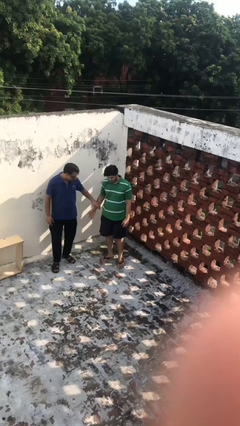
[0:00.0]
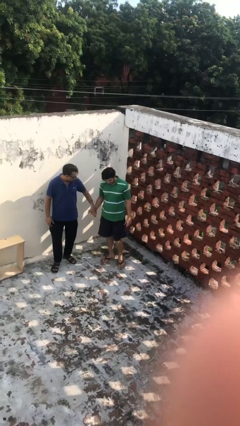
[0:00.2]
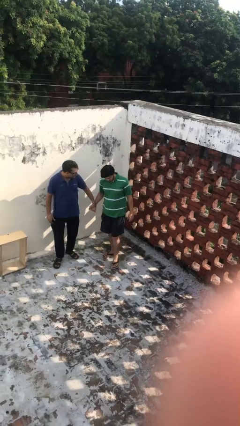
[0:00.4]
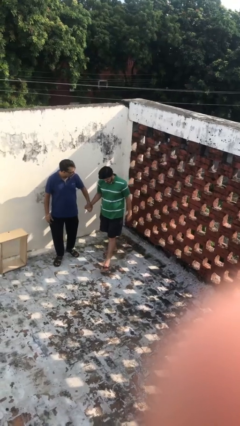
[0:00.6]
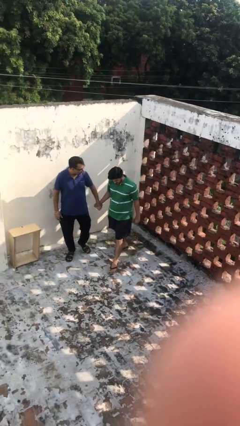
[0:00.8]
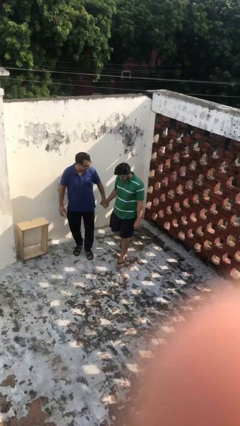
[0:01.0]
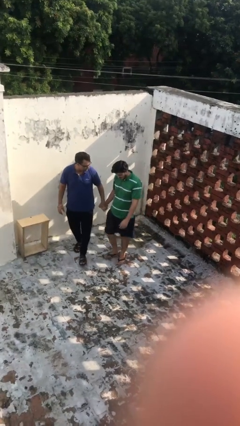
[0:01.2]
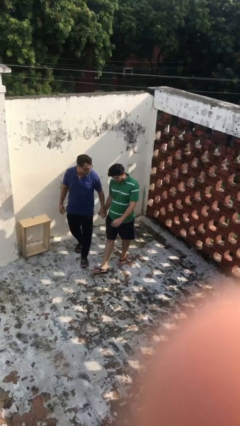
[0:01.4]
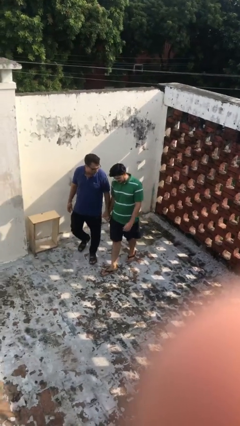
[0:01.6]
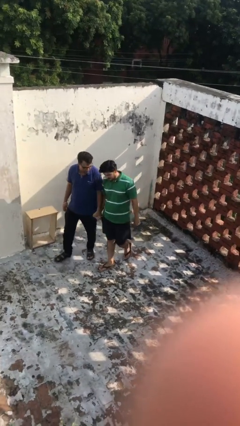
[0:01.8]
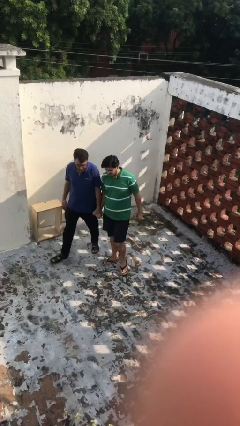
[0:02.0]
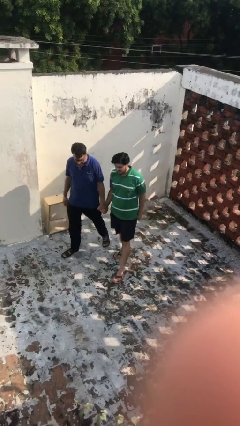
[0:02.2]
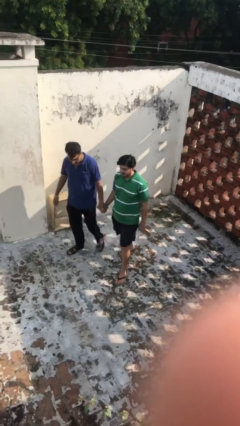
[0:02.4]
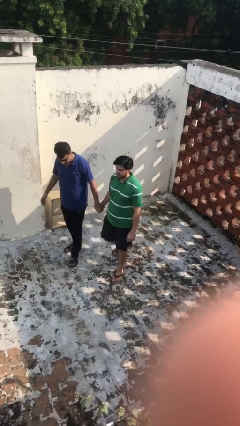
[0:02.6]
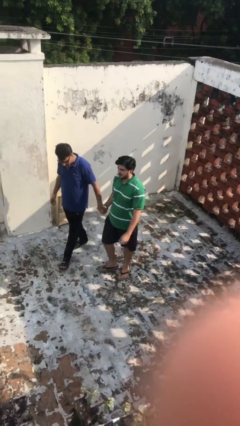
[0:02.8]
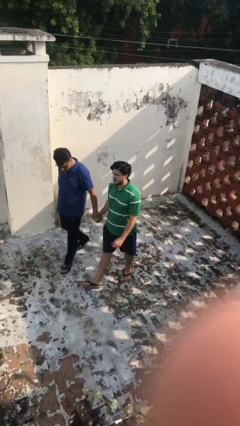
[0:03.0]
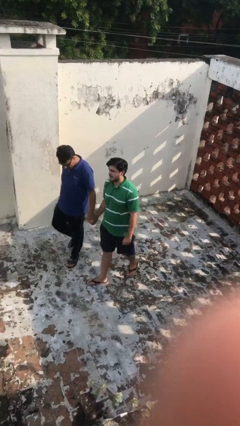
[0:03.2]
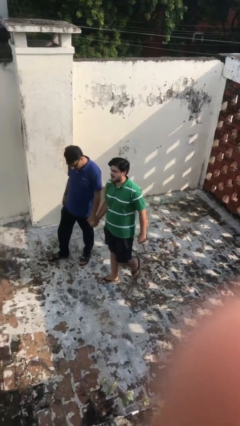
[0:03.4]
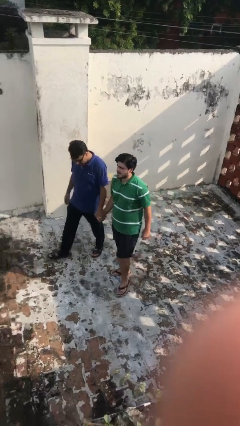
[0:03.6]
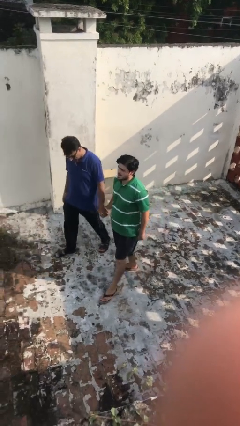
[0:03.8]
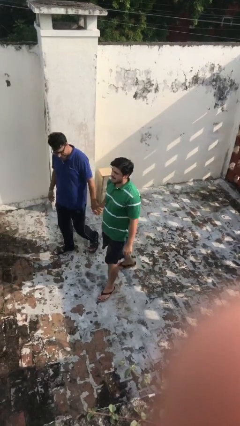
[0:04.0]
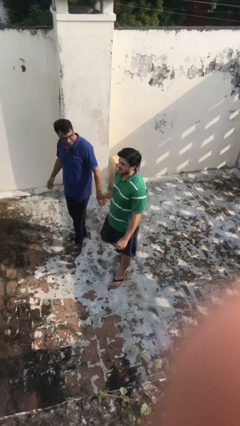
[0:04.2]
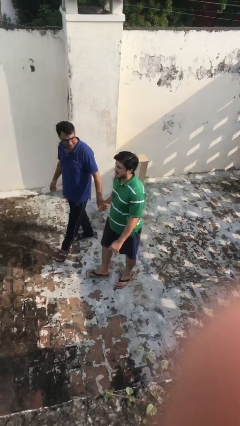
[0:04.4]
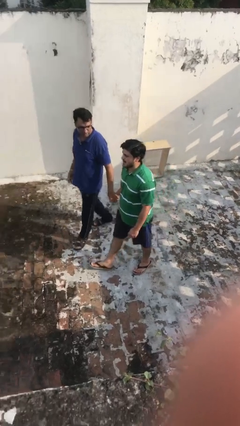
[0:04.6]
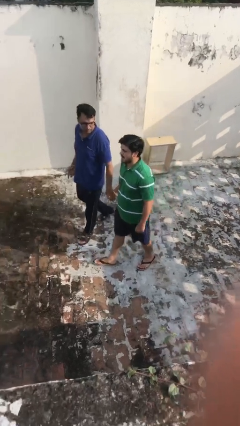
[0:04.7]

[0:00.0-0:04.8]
person holds hand

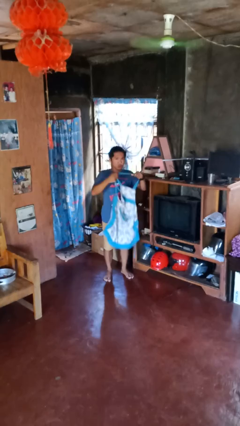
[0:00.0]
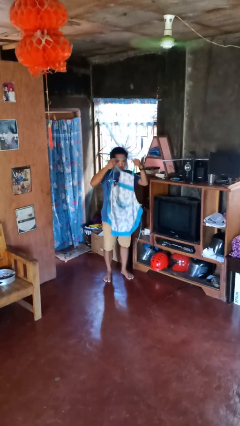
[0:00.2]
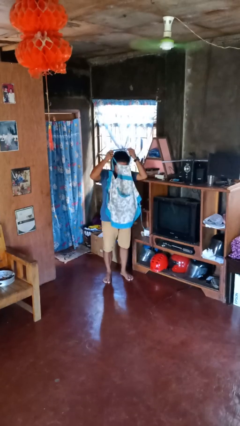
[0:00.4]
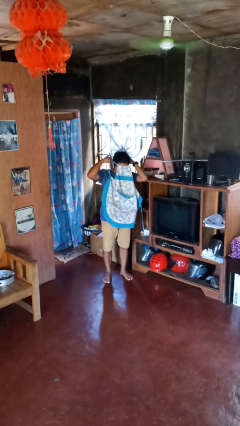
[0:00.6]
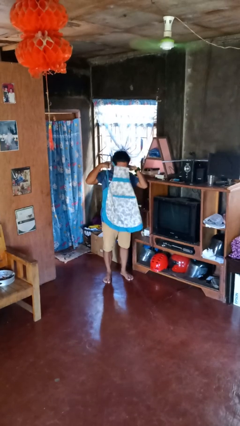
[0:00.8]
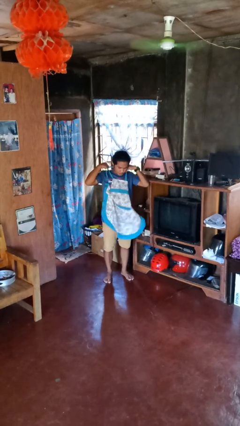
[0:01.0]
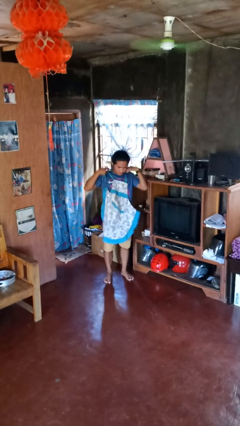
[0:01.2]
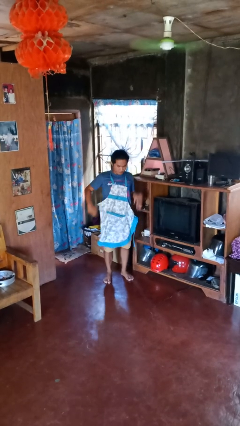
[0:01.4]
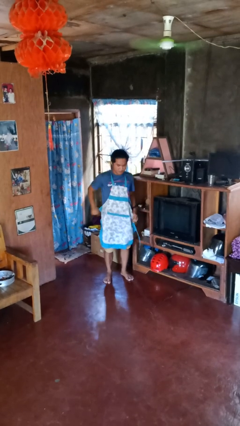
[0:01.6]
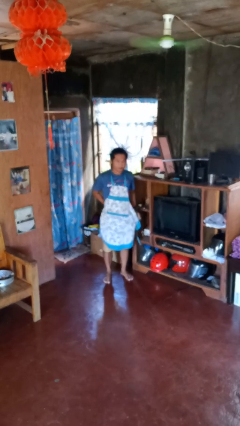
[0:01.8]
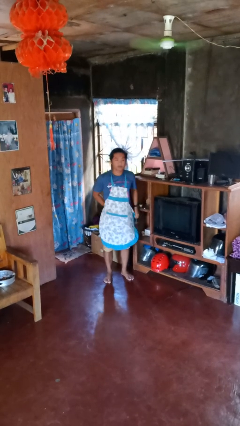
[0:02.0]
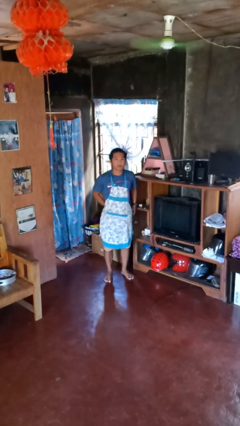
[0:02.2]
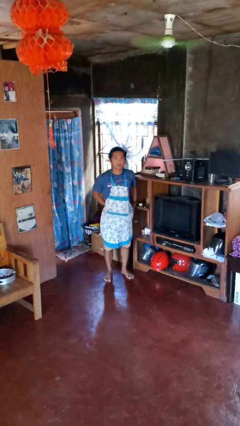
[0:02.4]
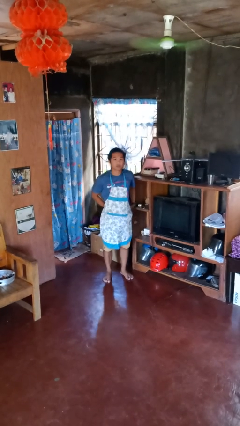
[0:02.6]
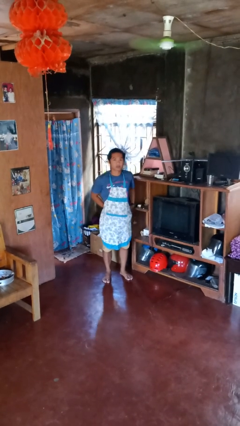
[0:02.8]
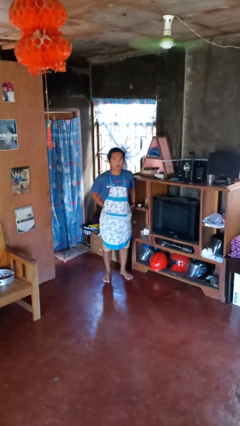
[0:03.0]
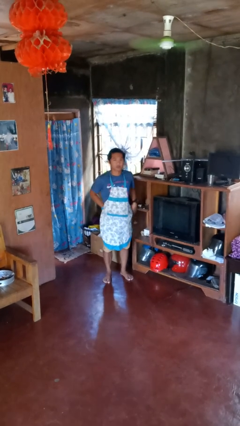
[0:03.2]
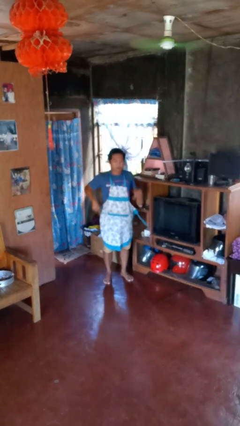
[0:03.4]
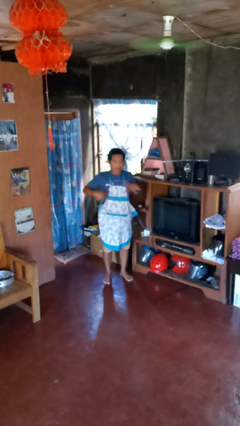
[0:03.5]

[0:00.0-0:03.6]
person puts on apron

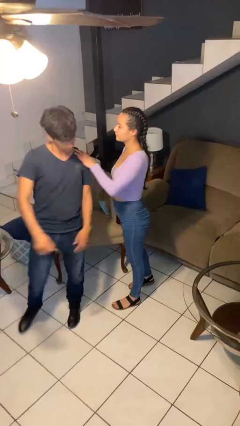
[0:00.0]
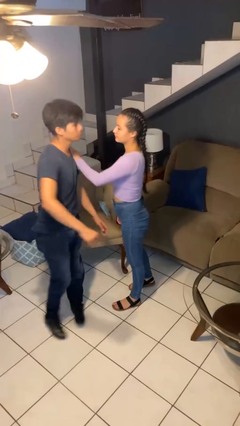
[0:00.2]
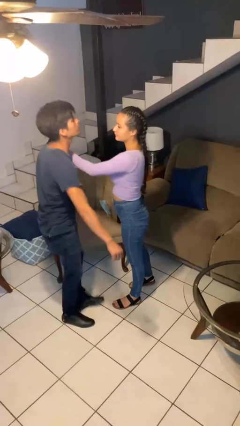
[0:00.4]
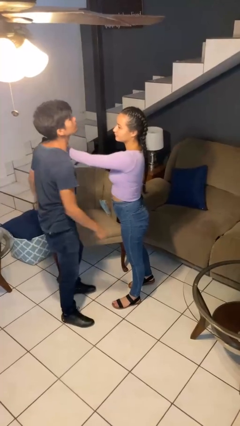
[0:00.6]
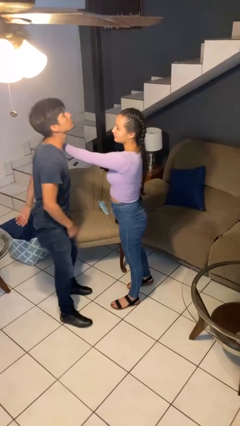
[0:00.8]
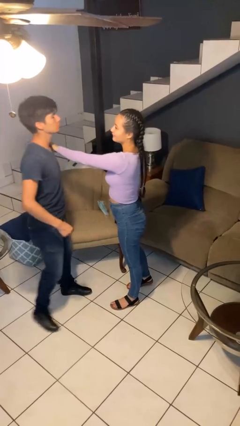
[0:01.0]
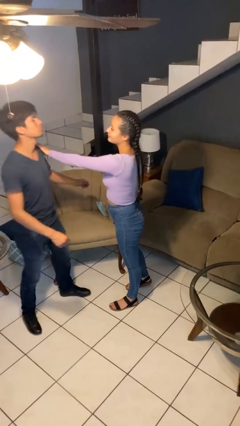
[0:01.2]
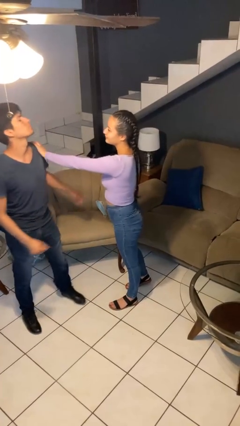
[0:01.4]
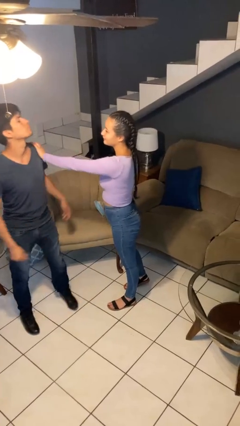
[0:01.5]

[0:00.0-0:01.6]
person spins person around

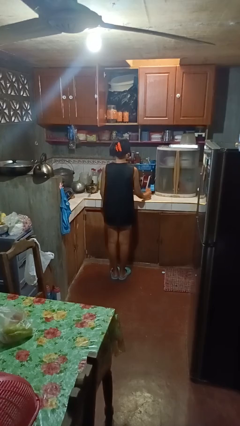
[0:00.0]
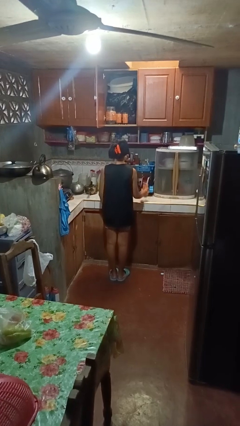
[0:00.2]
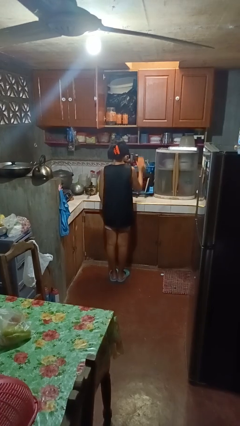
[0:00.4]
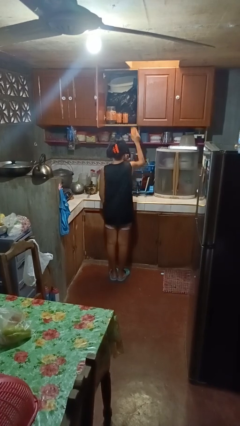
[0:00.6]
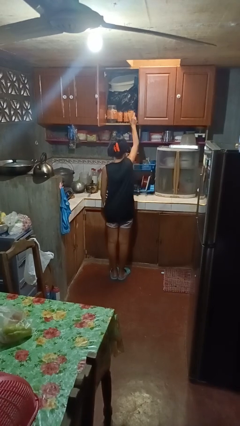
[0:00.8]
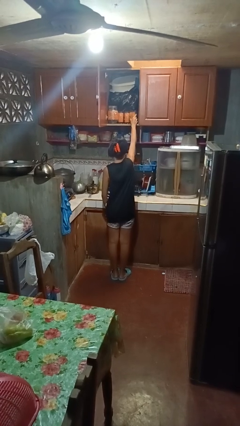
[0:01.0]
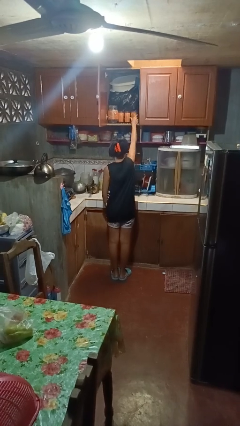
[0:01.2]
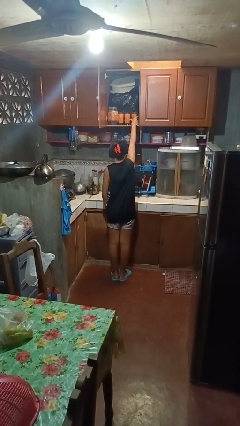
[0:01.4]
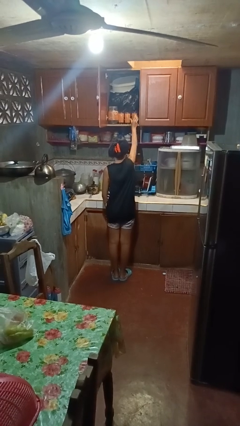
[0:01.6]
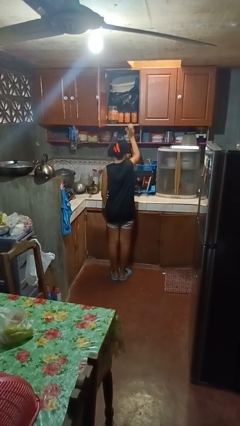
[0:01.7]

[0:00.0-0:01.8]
person puts object in cabinet

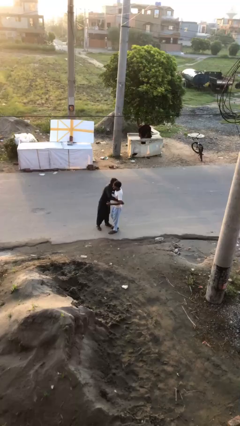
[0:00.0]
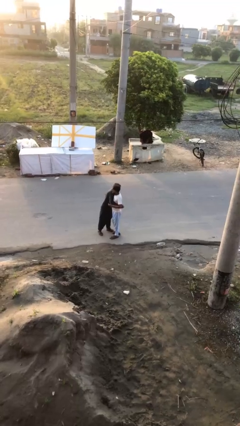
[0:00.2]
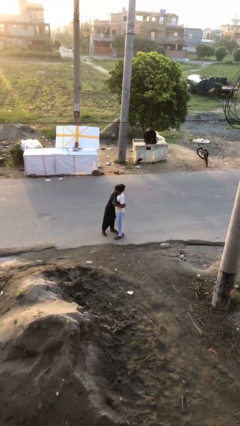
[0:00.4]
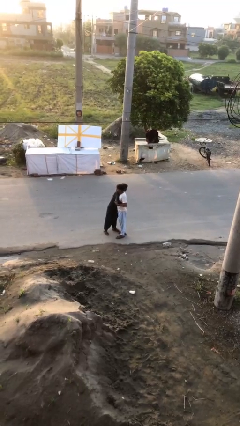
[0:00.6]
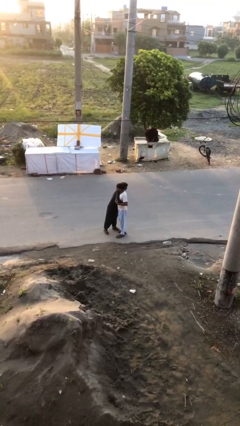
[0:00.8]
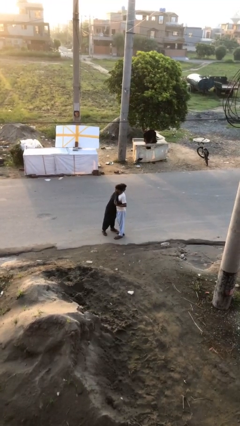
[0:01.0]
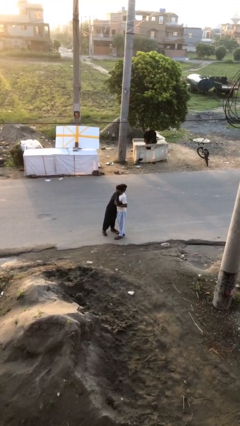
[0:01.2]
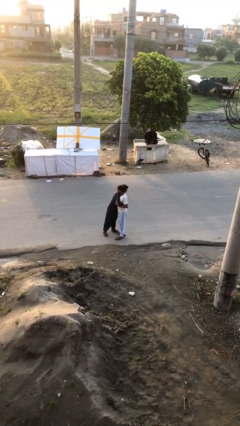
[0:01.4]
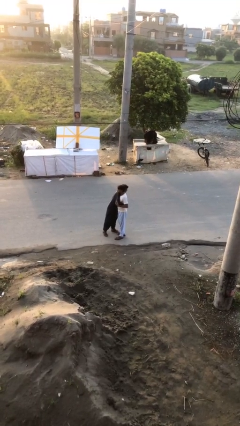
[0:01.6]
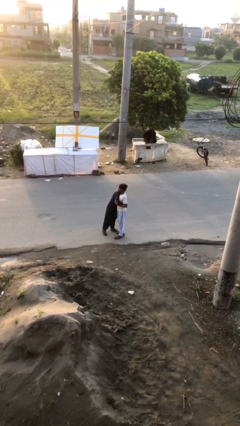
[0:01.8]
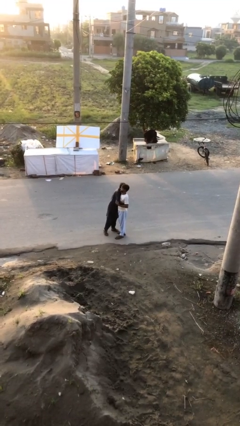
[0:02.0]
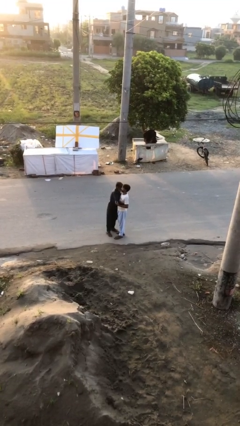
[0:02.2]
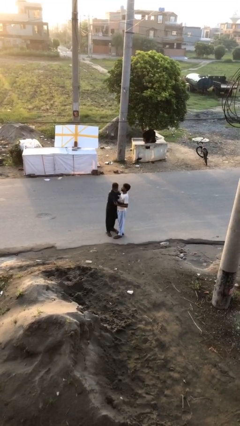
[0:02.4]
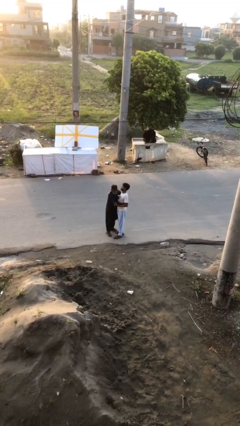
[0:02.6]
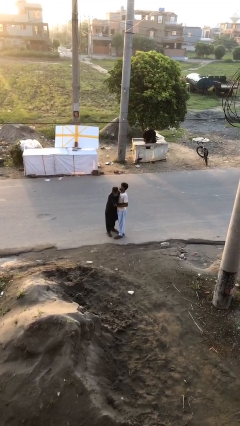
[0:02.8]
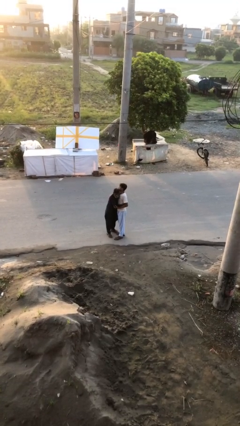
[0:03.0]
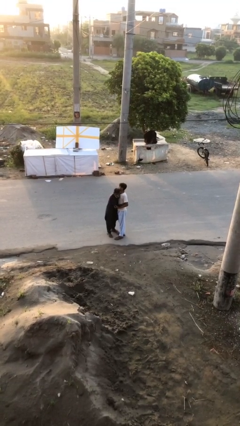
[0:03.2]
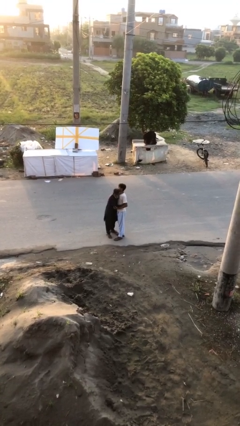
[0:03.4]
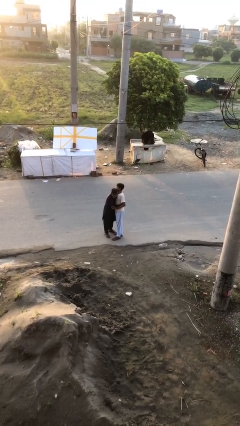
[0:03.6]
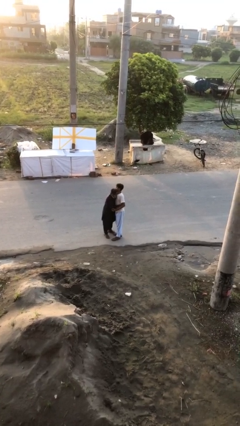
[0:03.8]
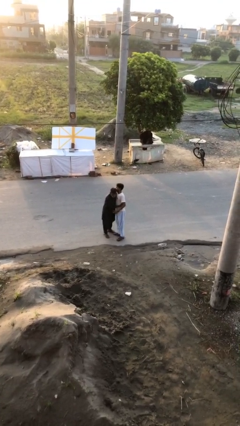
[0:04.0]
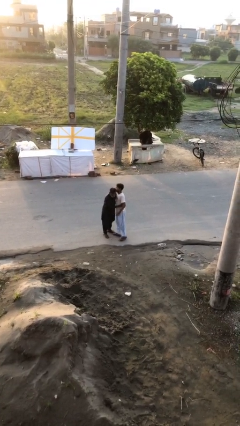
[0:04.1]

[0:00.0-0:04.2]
person embraces person

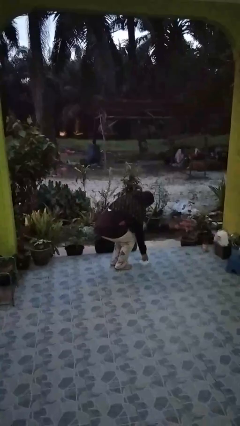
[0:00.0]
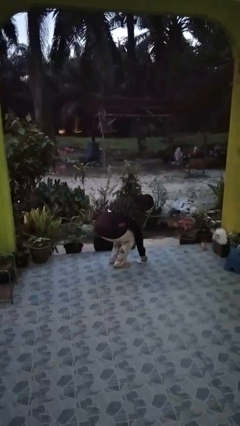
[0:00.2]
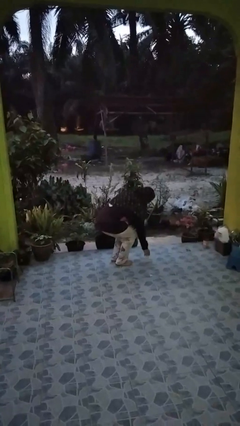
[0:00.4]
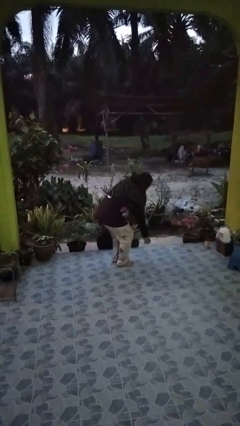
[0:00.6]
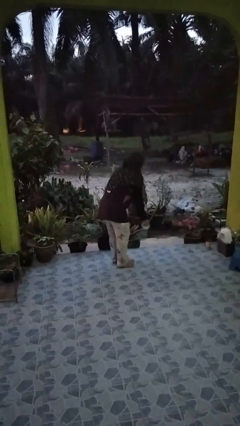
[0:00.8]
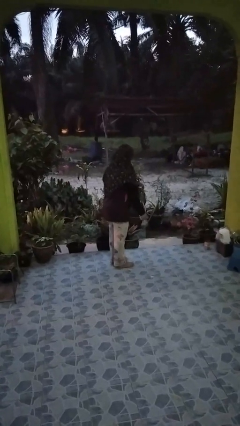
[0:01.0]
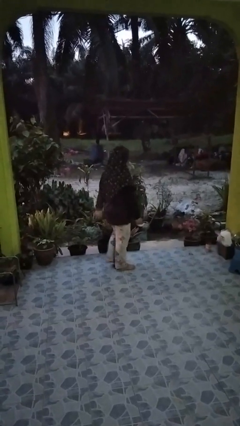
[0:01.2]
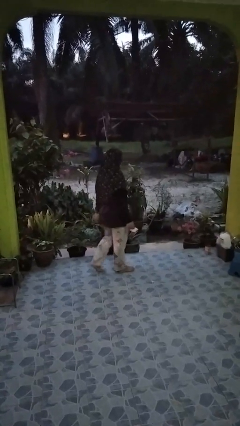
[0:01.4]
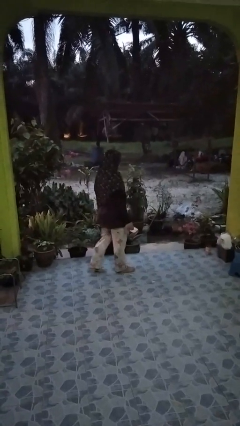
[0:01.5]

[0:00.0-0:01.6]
person picks up object from floor
